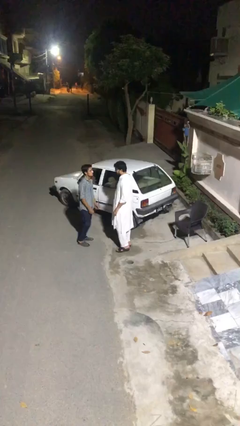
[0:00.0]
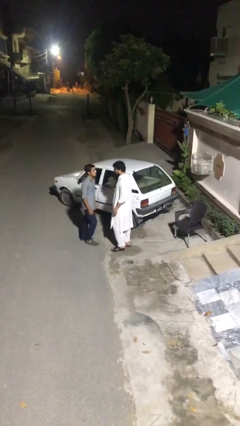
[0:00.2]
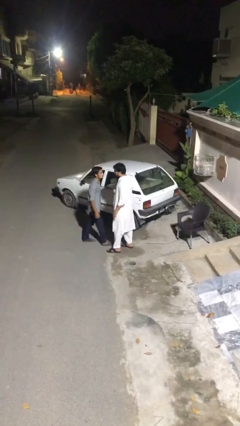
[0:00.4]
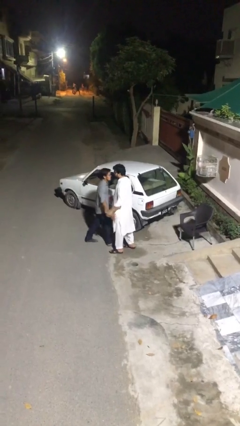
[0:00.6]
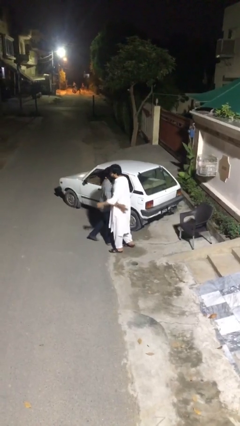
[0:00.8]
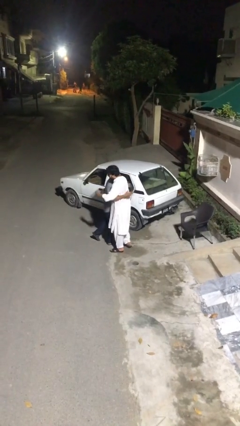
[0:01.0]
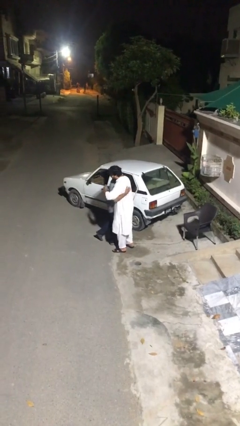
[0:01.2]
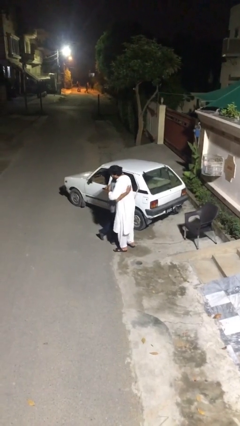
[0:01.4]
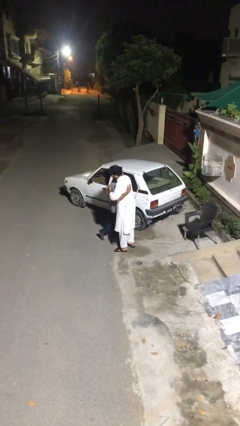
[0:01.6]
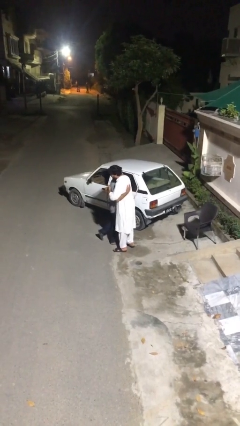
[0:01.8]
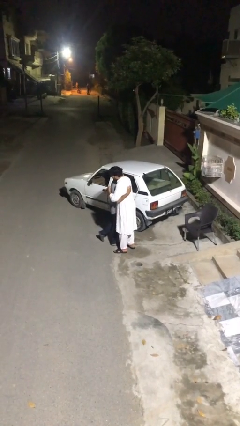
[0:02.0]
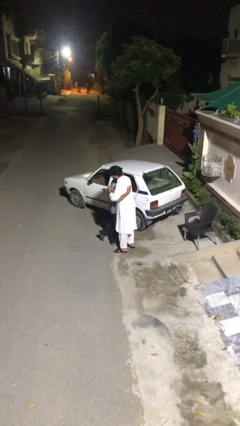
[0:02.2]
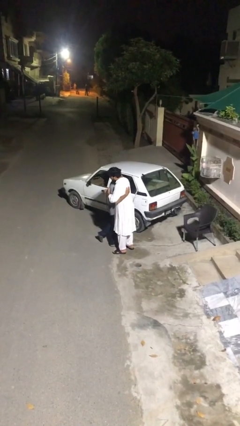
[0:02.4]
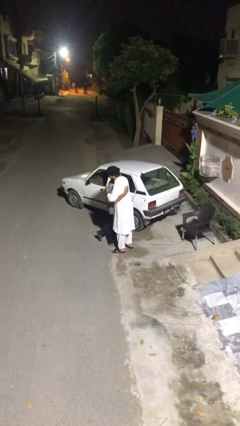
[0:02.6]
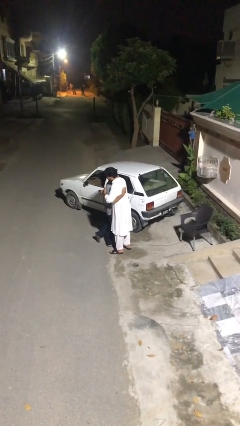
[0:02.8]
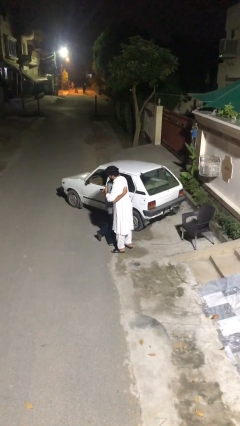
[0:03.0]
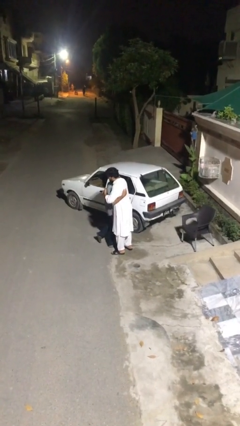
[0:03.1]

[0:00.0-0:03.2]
person embraces person

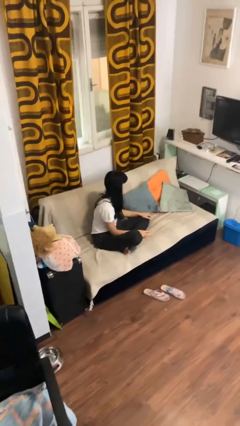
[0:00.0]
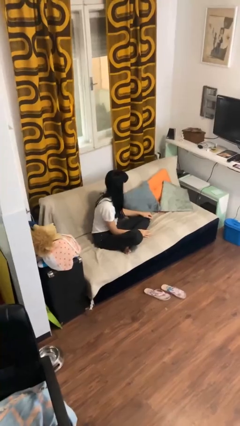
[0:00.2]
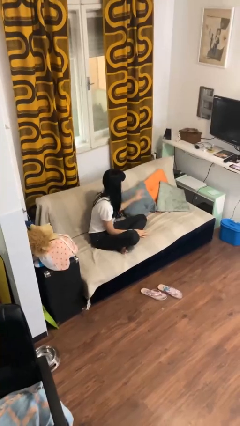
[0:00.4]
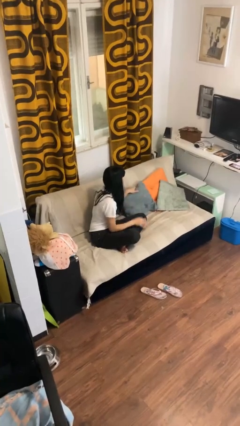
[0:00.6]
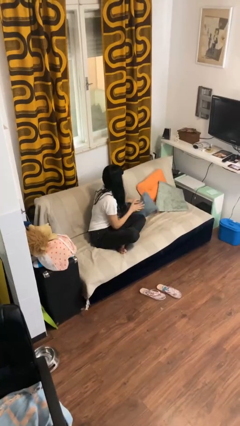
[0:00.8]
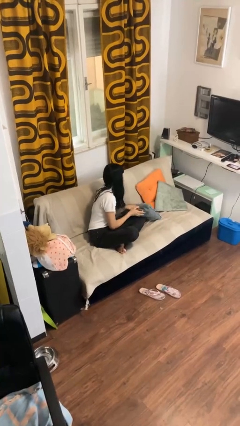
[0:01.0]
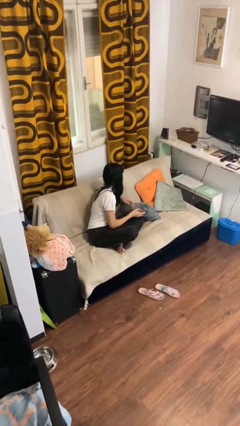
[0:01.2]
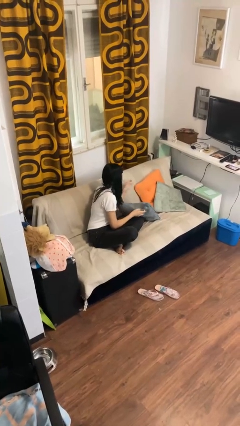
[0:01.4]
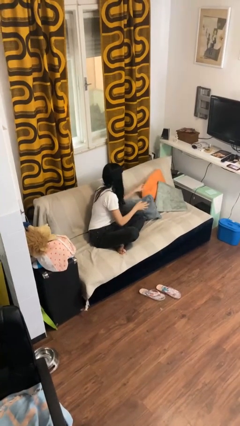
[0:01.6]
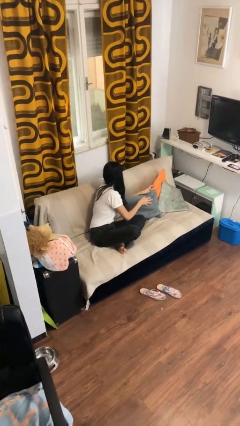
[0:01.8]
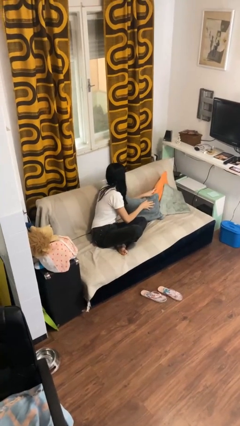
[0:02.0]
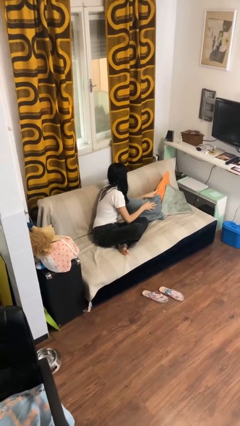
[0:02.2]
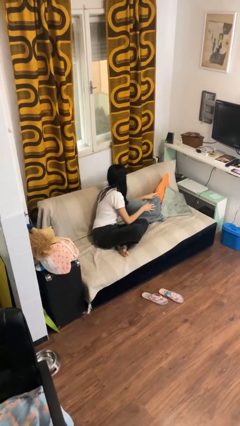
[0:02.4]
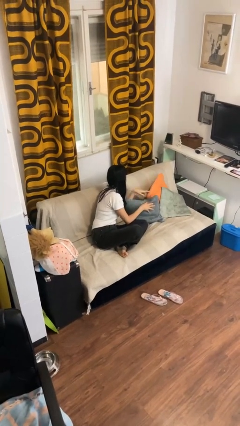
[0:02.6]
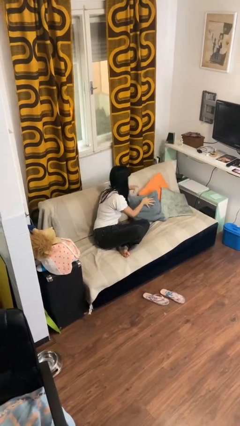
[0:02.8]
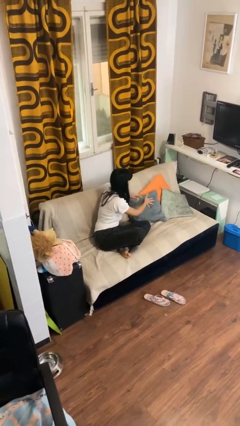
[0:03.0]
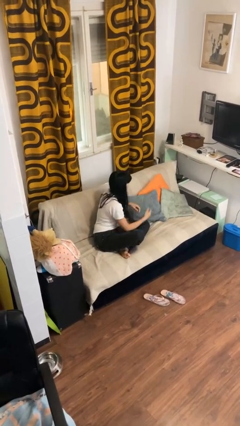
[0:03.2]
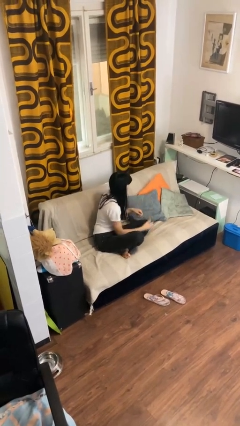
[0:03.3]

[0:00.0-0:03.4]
person searches in couch

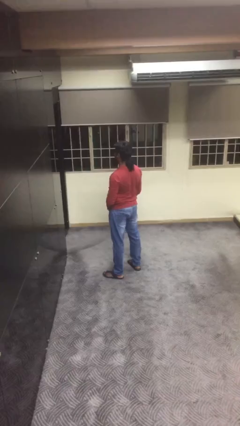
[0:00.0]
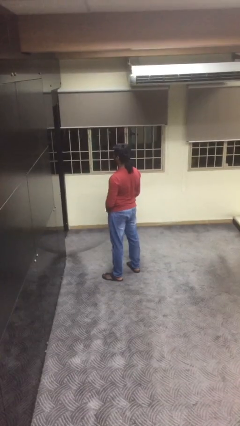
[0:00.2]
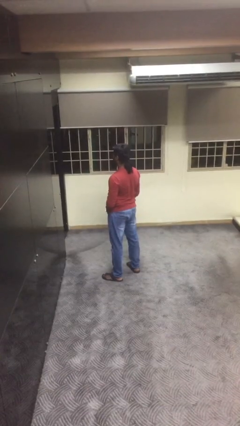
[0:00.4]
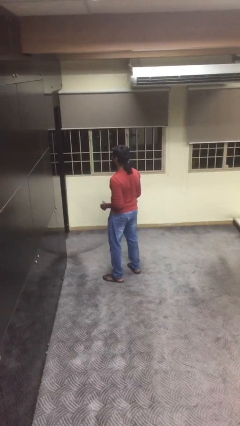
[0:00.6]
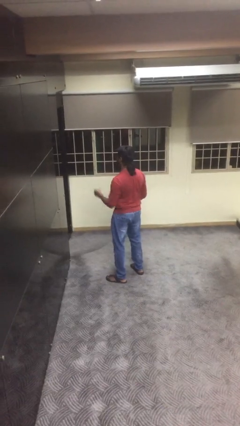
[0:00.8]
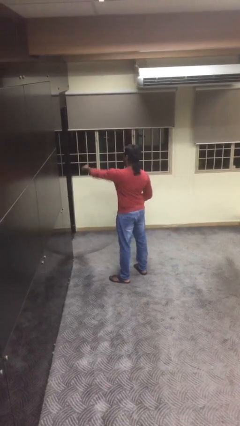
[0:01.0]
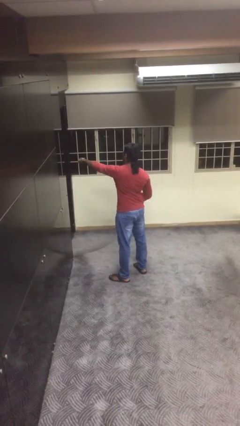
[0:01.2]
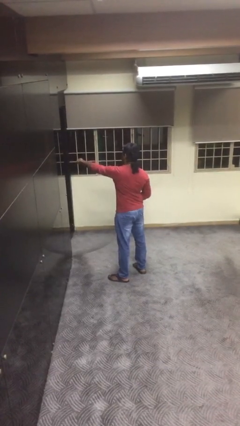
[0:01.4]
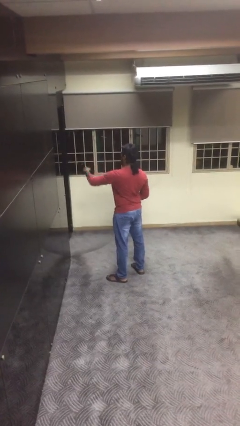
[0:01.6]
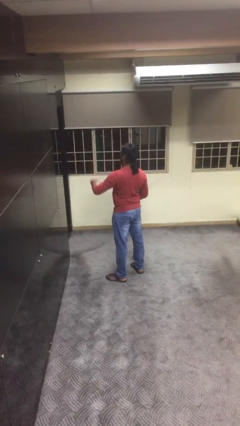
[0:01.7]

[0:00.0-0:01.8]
person punches

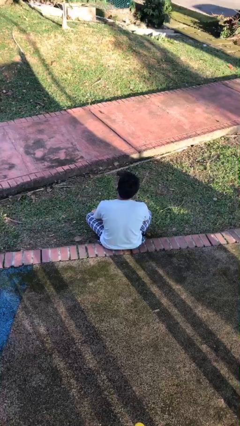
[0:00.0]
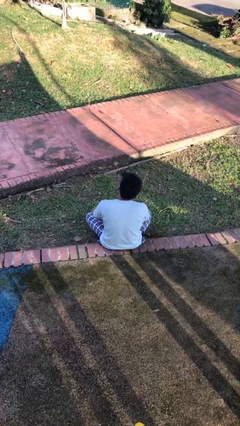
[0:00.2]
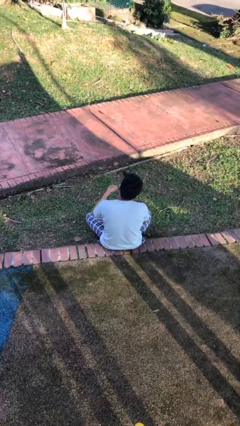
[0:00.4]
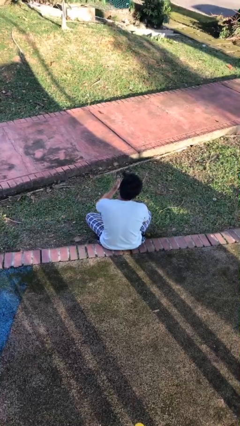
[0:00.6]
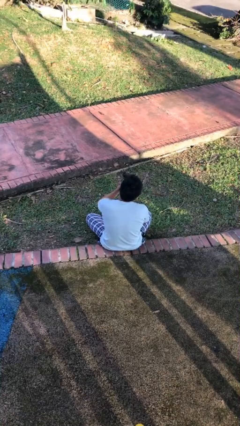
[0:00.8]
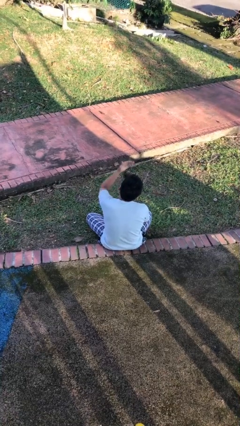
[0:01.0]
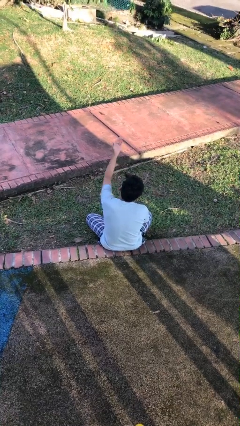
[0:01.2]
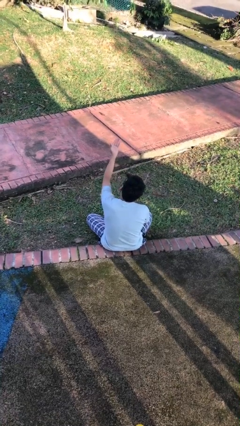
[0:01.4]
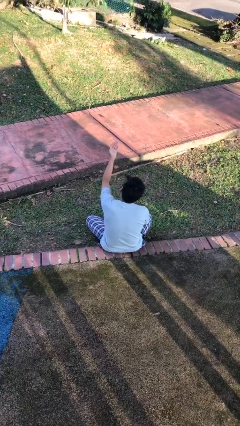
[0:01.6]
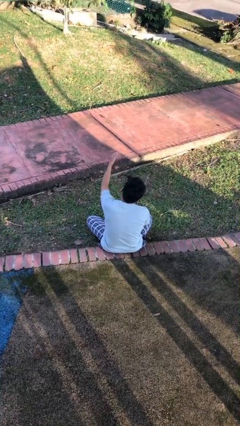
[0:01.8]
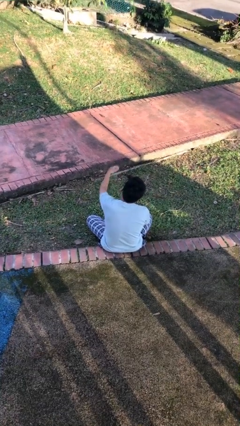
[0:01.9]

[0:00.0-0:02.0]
person gestures blow kiss

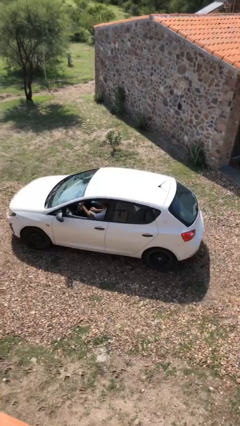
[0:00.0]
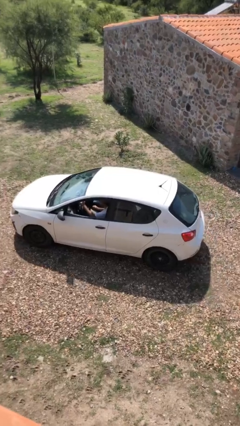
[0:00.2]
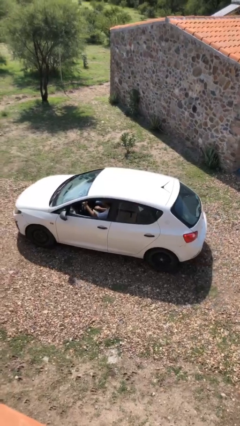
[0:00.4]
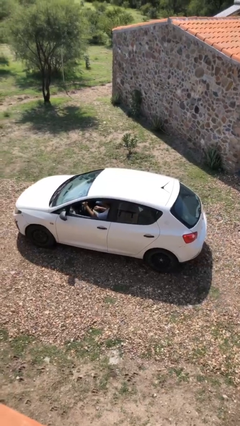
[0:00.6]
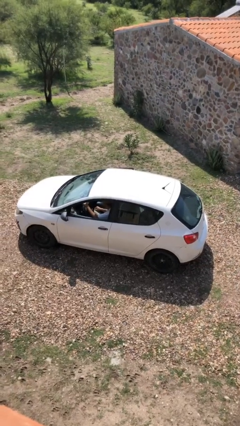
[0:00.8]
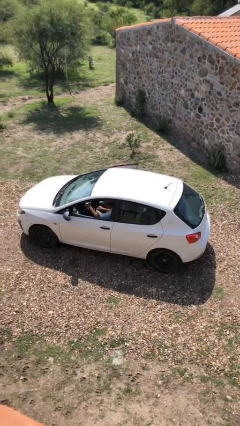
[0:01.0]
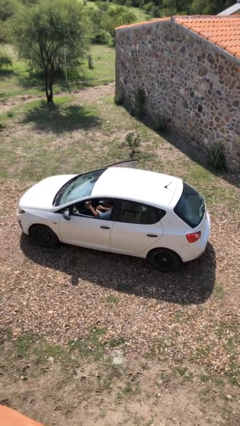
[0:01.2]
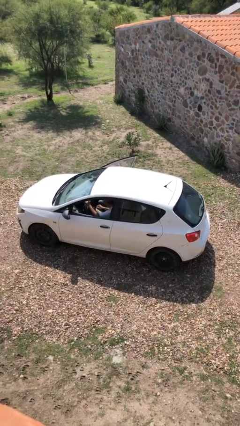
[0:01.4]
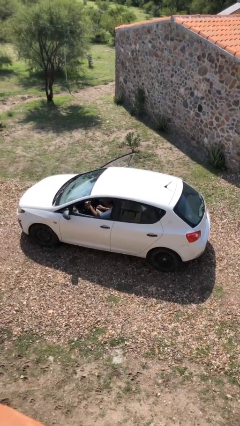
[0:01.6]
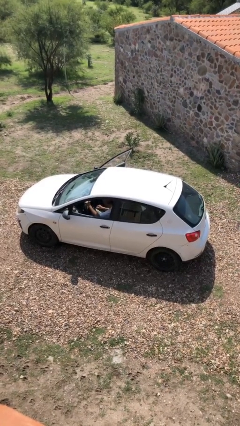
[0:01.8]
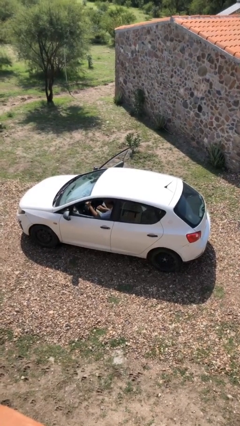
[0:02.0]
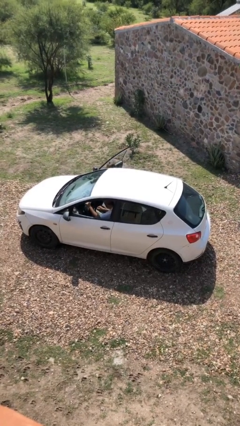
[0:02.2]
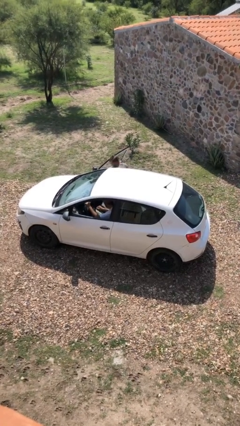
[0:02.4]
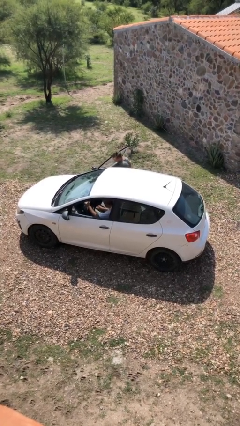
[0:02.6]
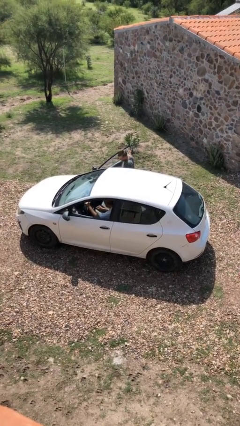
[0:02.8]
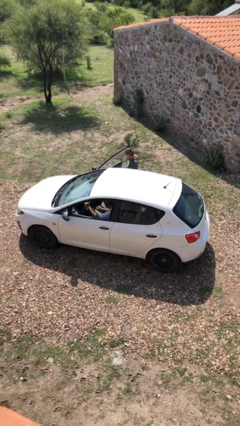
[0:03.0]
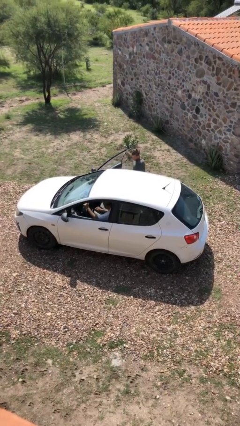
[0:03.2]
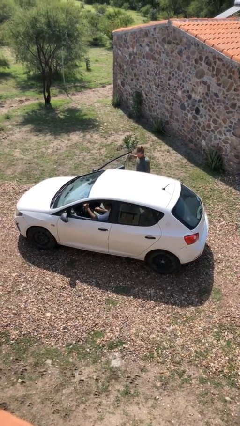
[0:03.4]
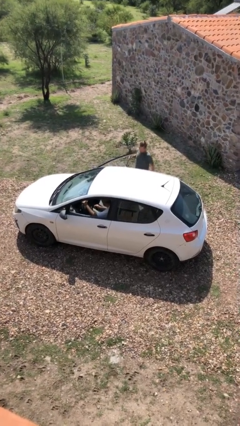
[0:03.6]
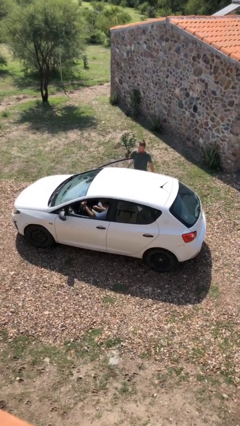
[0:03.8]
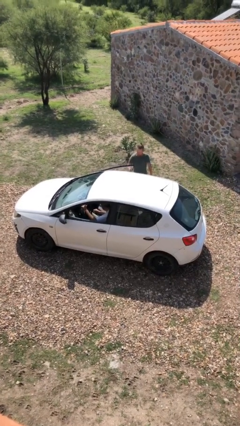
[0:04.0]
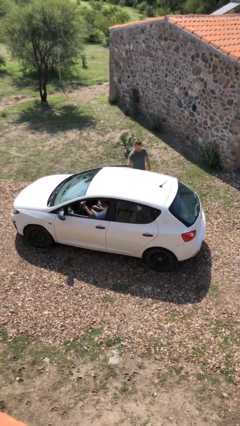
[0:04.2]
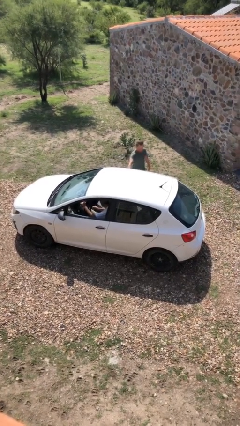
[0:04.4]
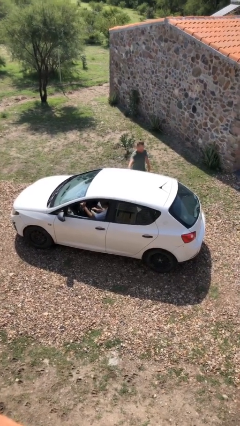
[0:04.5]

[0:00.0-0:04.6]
car drops off person

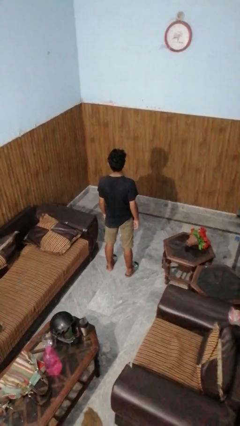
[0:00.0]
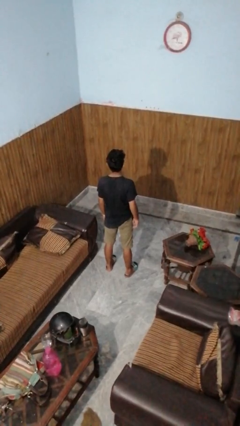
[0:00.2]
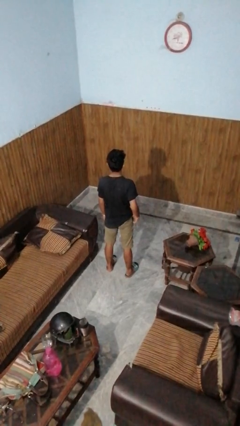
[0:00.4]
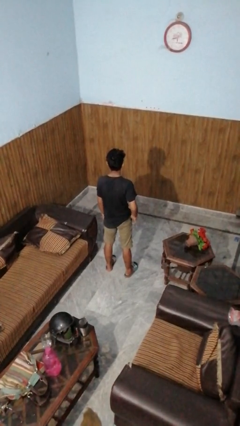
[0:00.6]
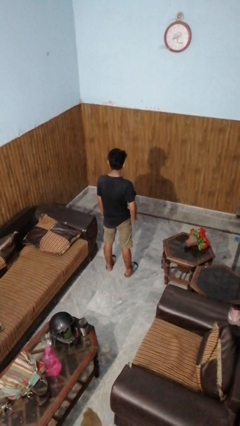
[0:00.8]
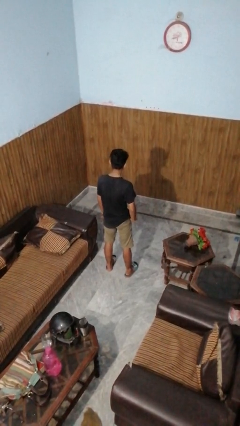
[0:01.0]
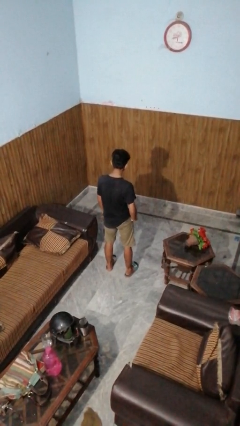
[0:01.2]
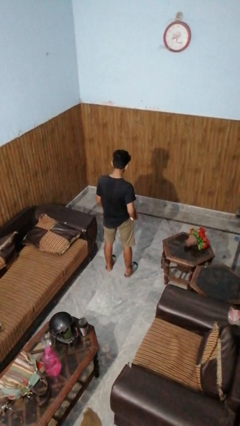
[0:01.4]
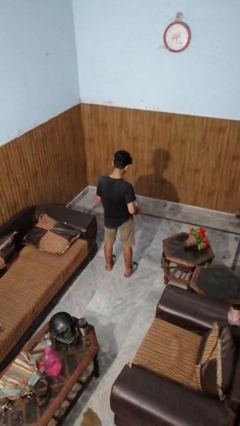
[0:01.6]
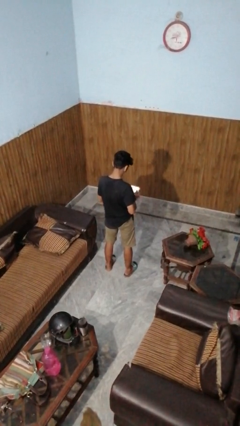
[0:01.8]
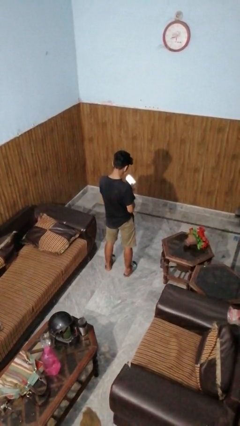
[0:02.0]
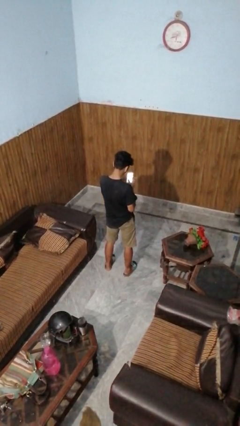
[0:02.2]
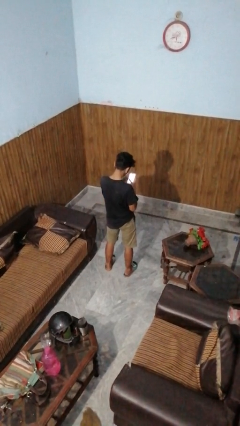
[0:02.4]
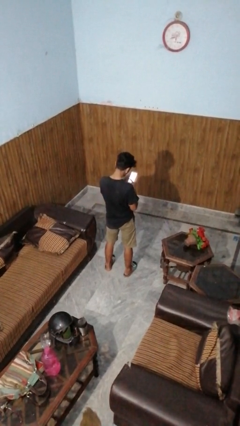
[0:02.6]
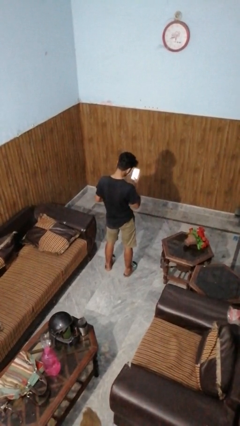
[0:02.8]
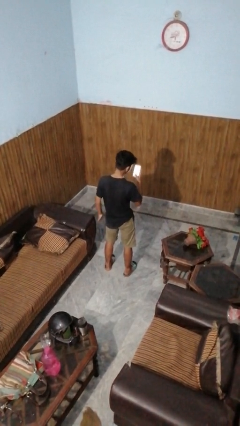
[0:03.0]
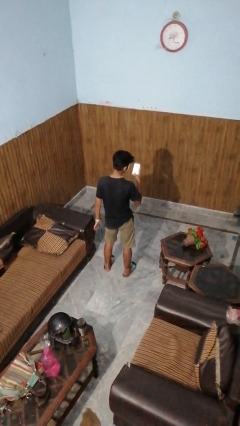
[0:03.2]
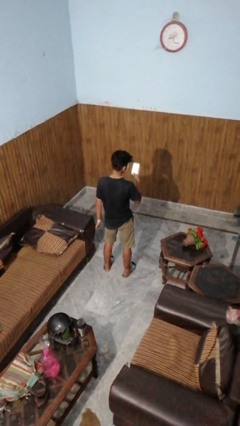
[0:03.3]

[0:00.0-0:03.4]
person takes phone from pocket
